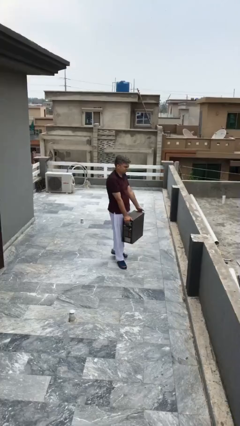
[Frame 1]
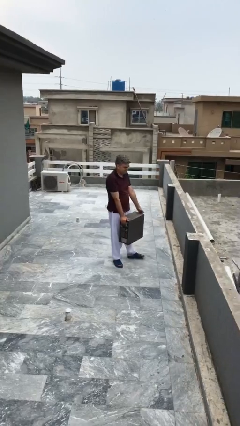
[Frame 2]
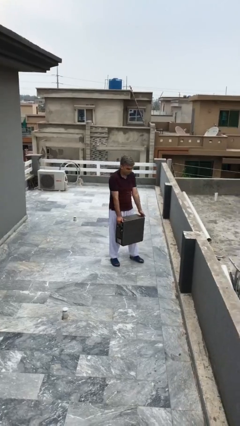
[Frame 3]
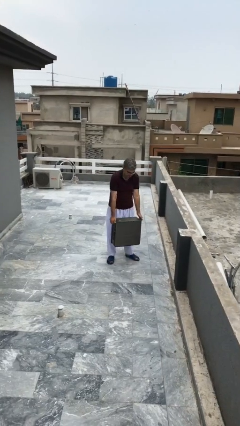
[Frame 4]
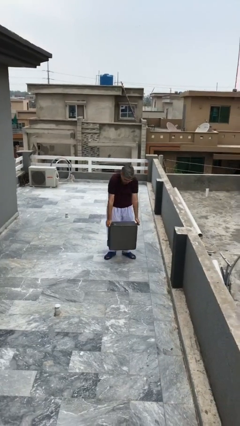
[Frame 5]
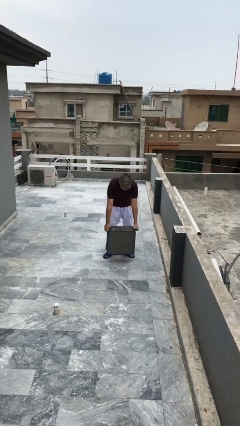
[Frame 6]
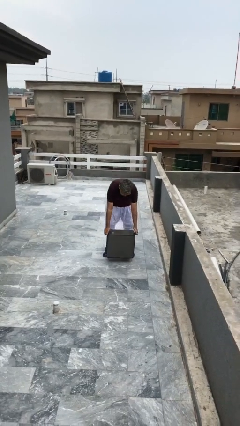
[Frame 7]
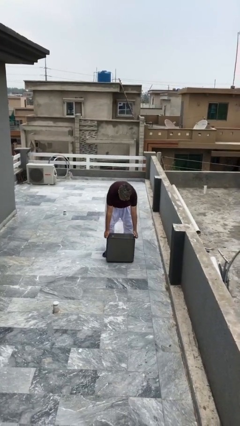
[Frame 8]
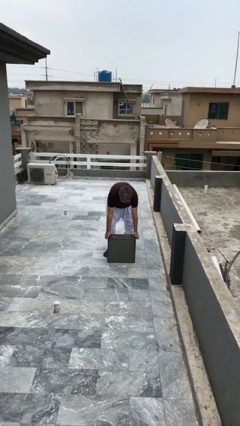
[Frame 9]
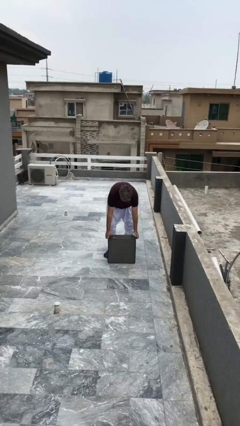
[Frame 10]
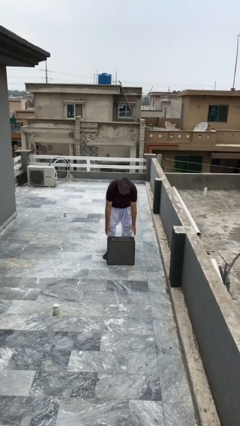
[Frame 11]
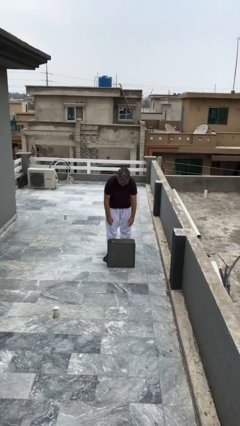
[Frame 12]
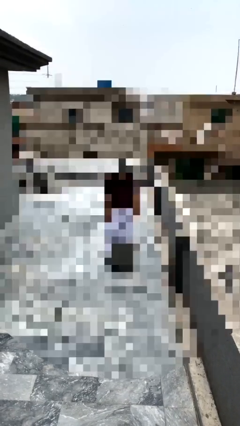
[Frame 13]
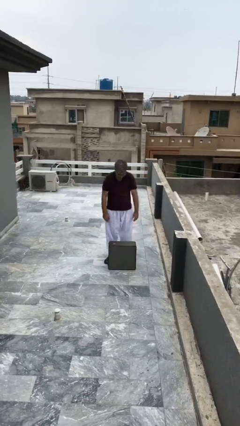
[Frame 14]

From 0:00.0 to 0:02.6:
person puts down object on floor

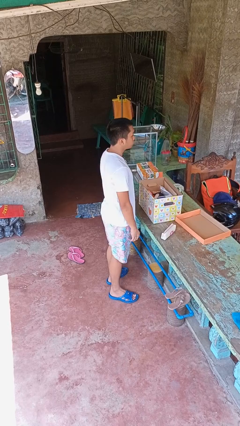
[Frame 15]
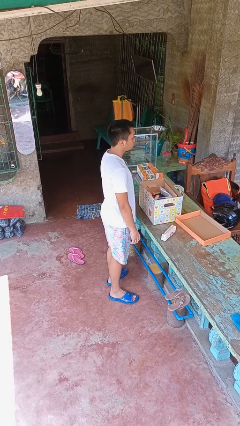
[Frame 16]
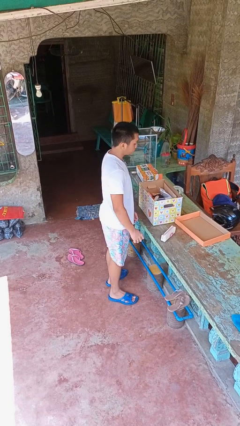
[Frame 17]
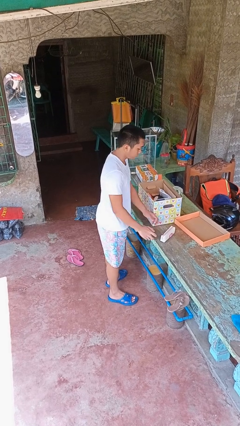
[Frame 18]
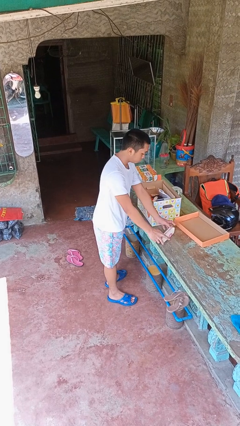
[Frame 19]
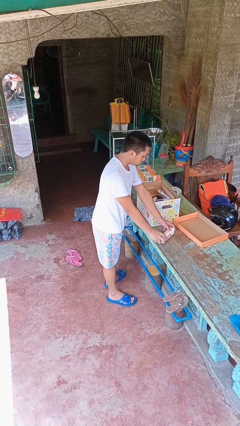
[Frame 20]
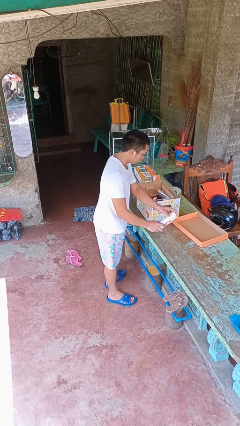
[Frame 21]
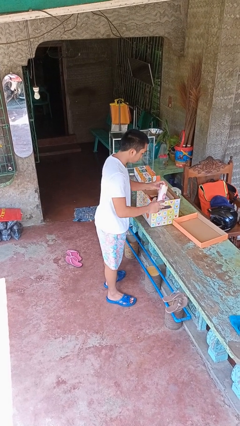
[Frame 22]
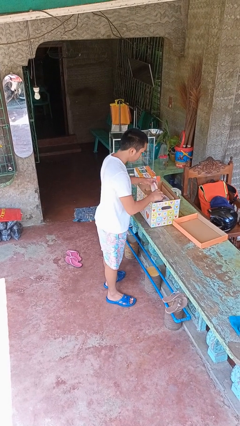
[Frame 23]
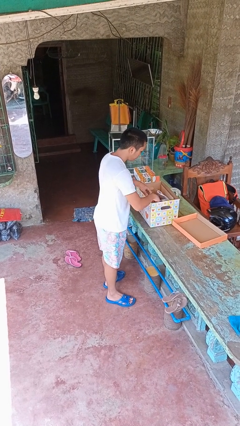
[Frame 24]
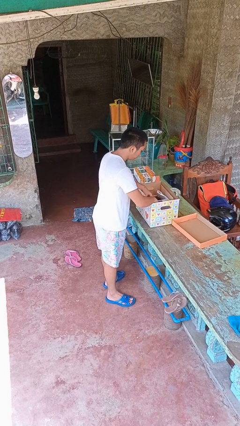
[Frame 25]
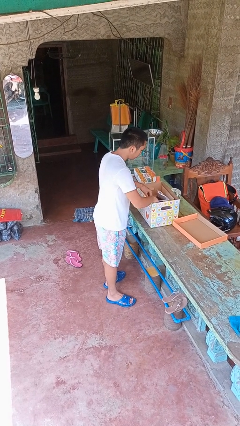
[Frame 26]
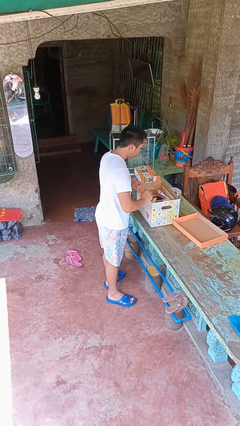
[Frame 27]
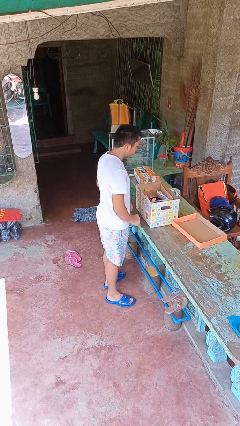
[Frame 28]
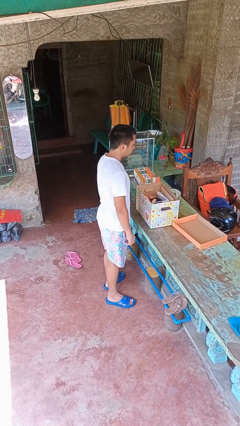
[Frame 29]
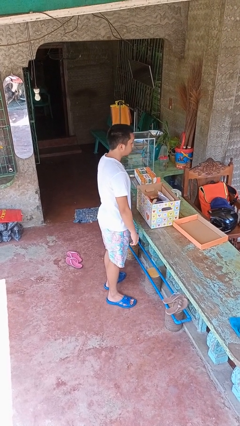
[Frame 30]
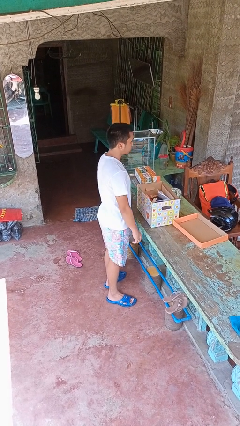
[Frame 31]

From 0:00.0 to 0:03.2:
person puts object into box

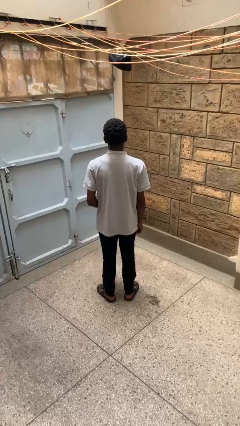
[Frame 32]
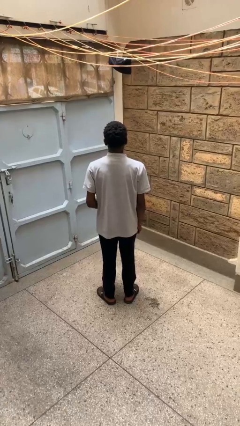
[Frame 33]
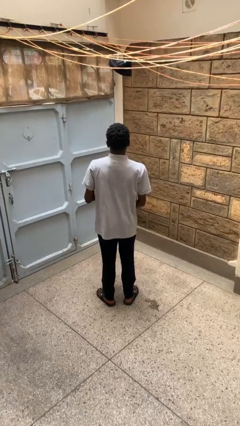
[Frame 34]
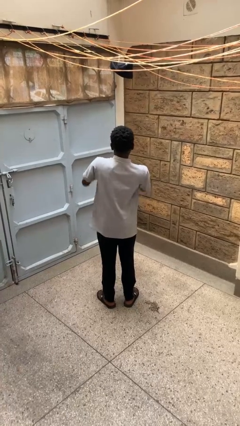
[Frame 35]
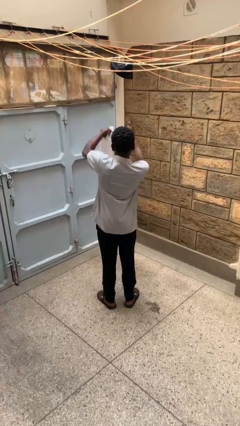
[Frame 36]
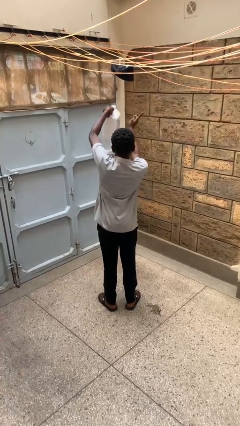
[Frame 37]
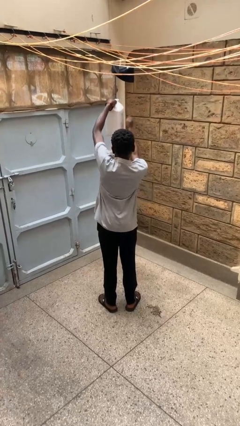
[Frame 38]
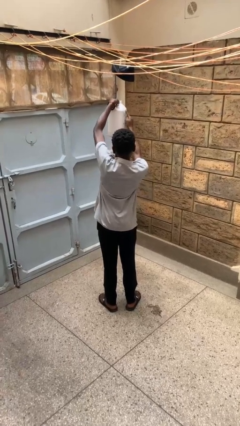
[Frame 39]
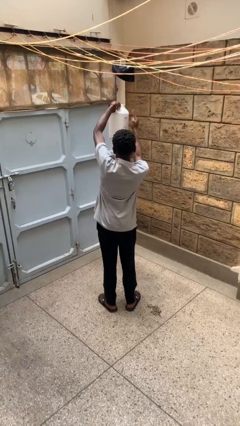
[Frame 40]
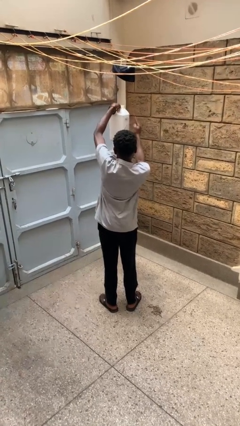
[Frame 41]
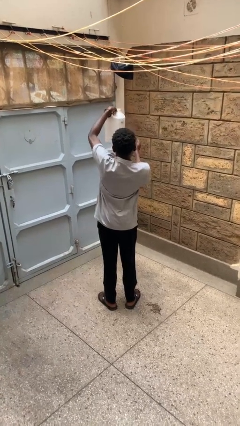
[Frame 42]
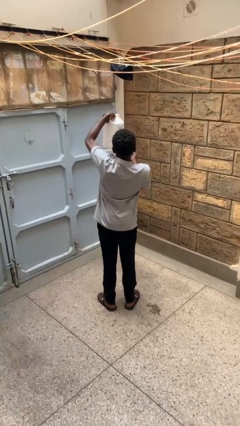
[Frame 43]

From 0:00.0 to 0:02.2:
person taps object with finger

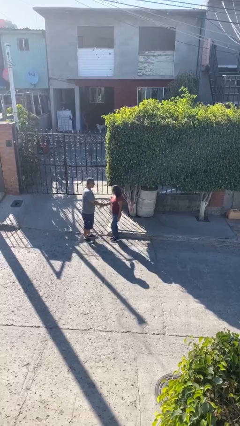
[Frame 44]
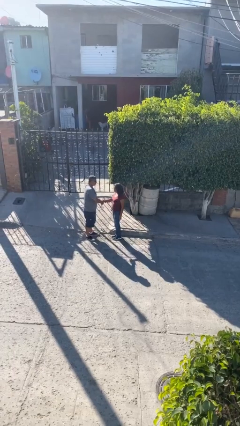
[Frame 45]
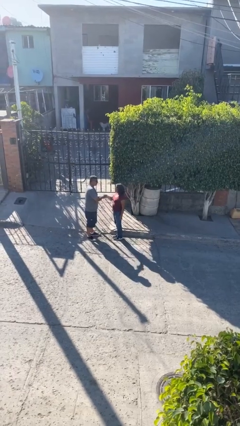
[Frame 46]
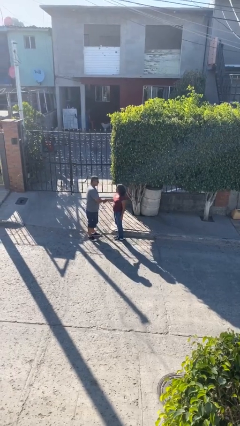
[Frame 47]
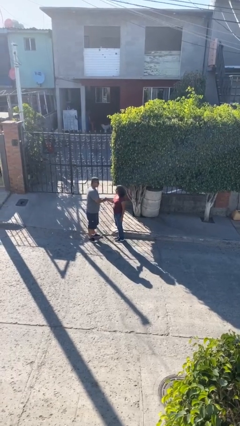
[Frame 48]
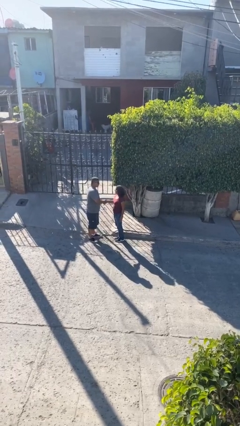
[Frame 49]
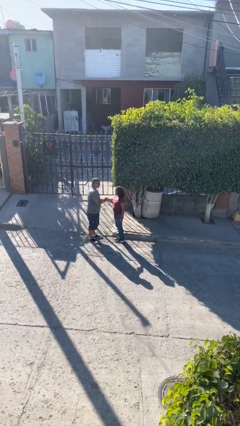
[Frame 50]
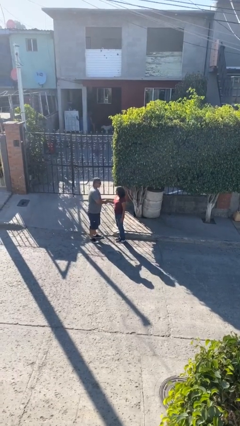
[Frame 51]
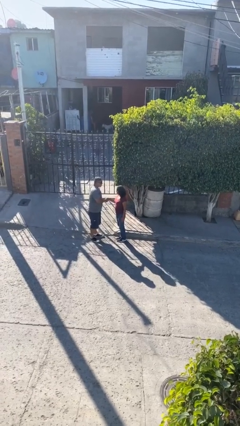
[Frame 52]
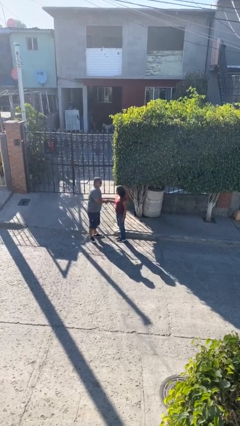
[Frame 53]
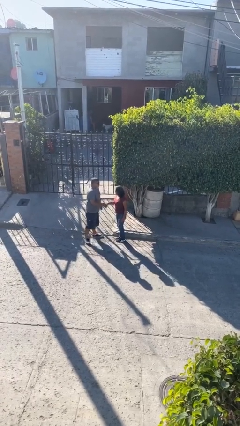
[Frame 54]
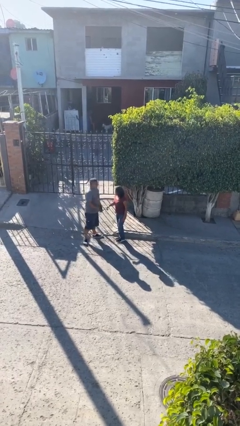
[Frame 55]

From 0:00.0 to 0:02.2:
person shakes hand

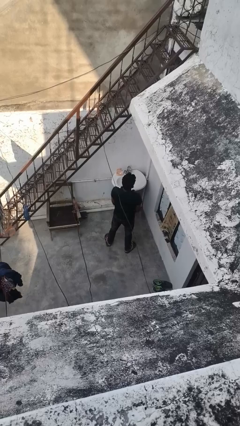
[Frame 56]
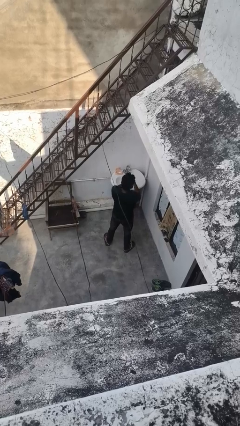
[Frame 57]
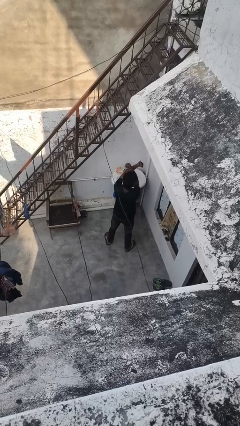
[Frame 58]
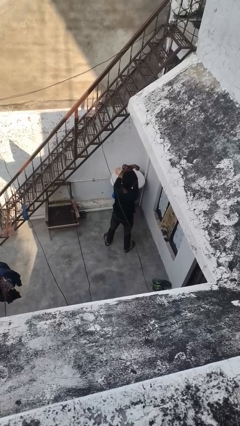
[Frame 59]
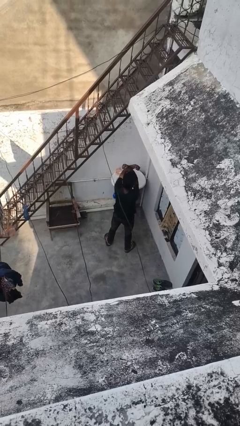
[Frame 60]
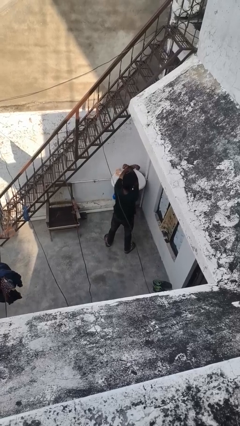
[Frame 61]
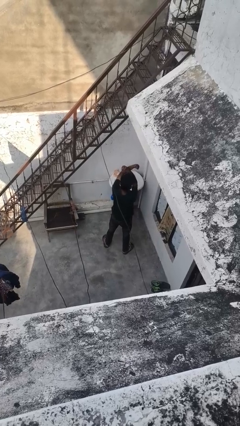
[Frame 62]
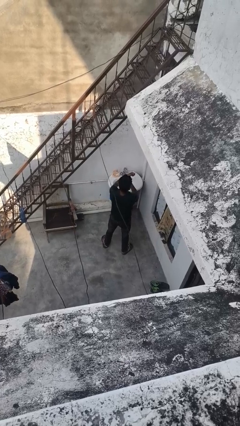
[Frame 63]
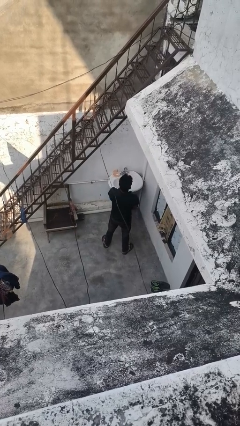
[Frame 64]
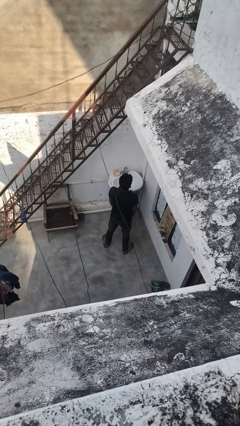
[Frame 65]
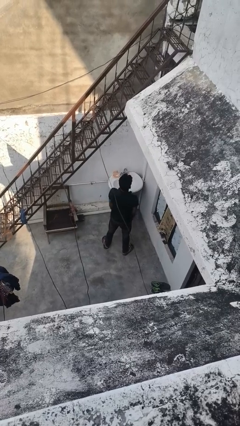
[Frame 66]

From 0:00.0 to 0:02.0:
person gestures arms x

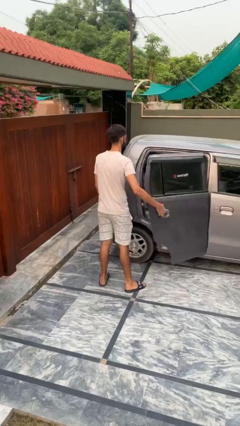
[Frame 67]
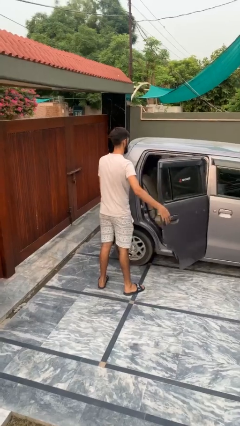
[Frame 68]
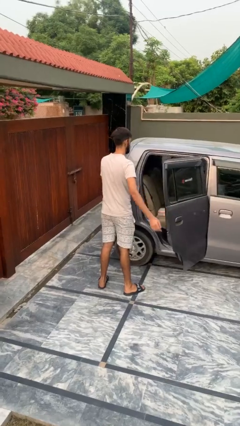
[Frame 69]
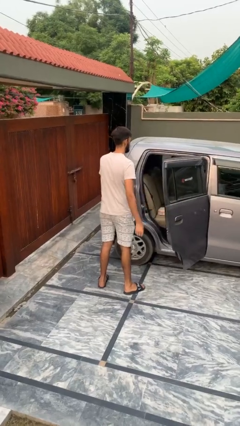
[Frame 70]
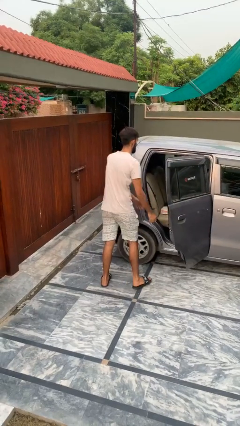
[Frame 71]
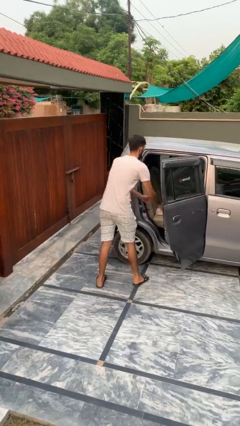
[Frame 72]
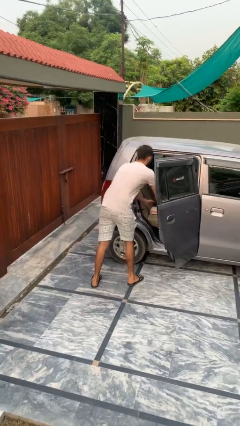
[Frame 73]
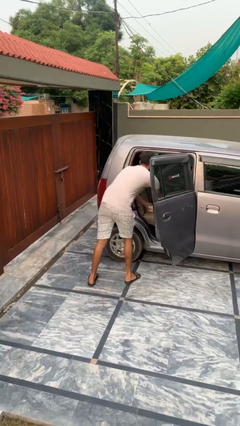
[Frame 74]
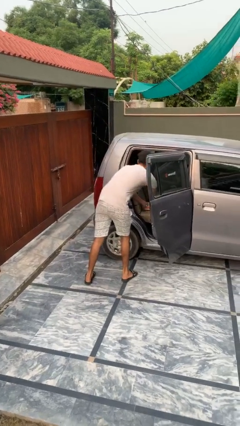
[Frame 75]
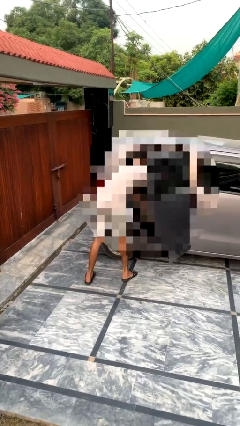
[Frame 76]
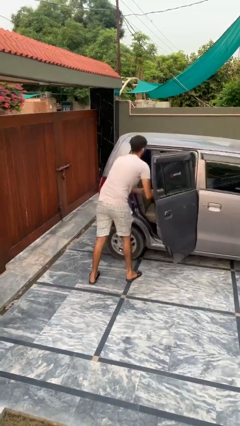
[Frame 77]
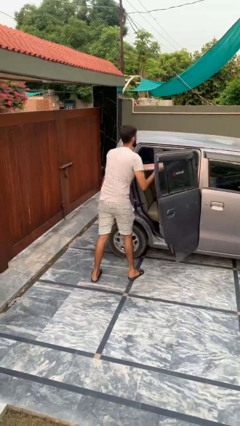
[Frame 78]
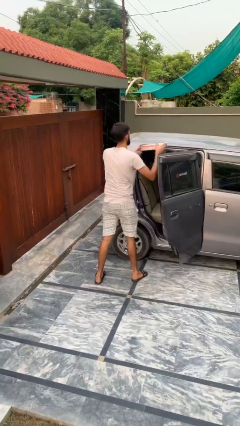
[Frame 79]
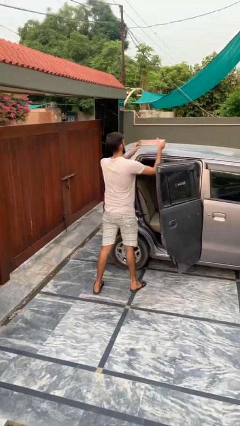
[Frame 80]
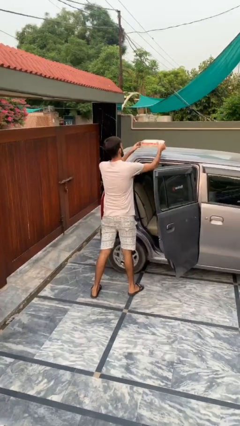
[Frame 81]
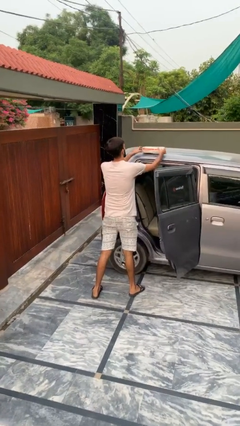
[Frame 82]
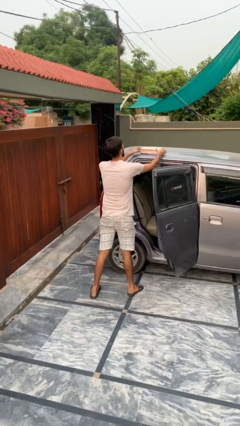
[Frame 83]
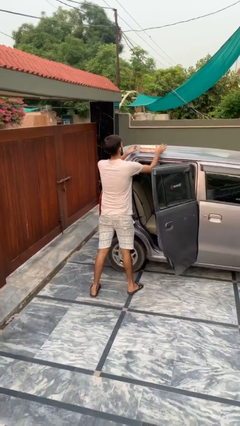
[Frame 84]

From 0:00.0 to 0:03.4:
person unloads car

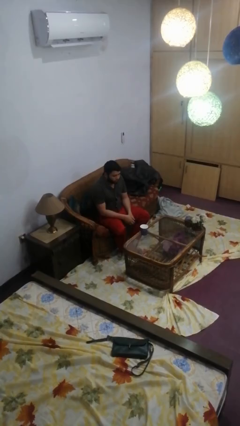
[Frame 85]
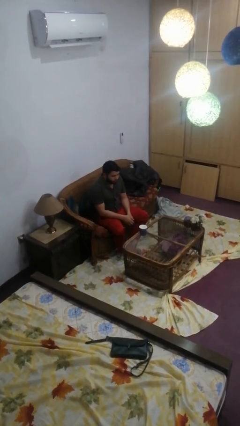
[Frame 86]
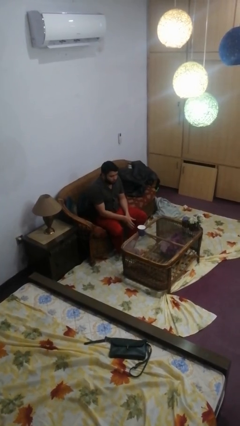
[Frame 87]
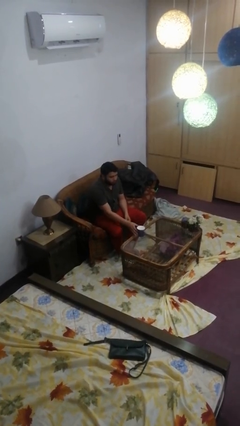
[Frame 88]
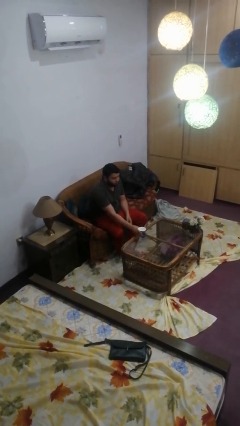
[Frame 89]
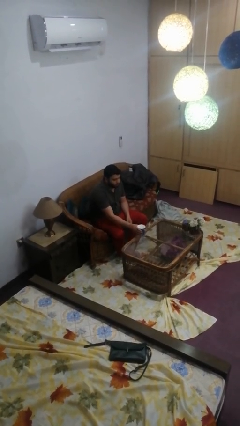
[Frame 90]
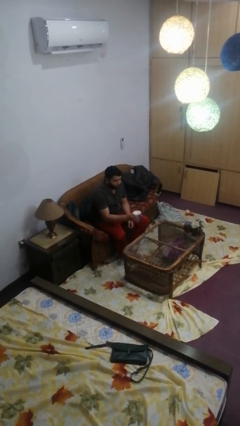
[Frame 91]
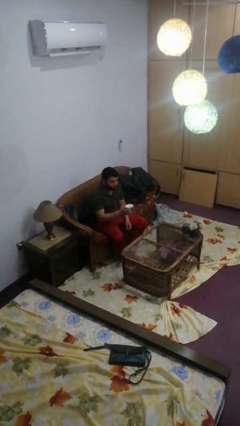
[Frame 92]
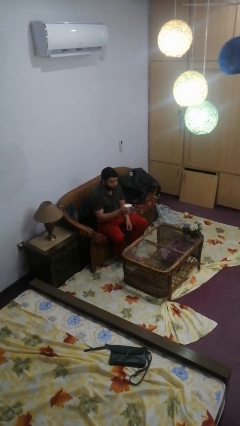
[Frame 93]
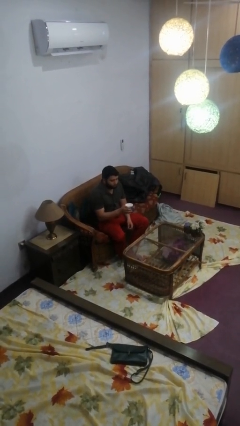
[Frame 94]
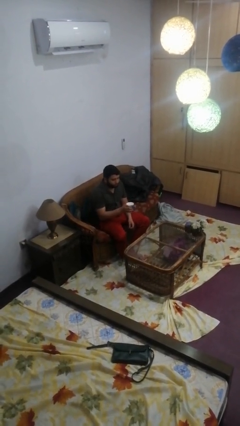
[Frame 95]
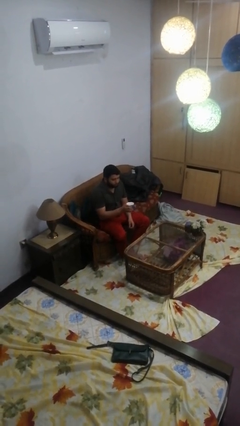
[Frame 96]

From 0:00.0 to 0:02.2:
person picks up object from table
